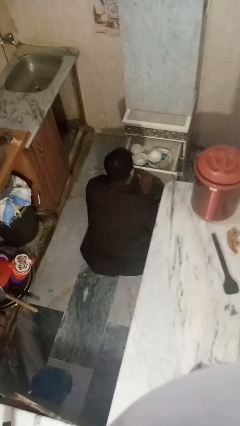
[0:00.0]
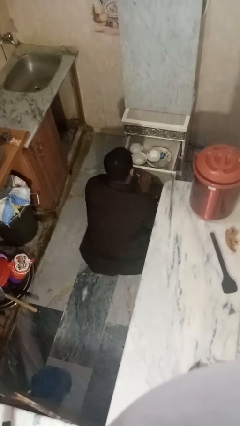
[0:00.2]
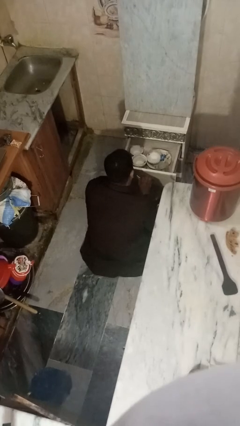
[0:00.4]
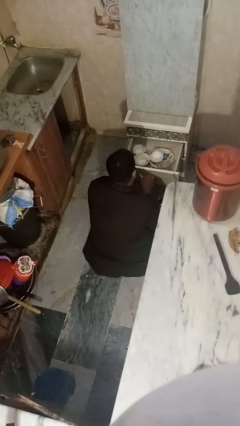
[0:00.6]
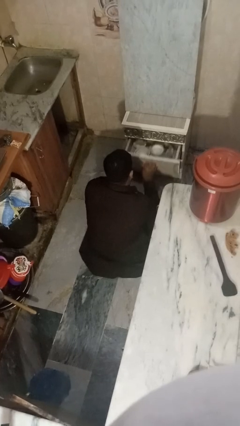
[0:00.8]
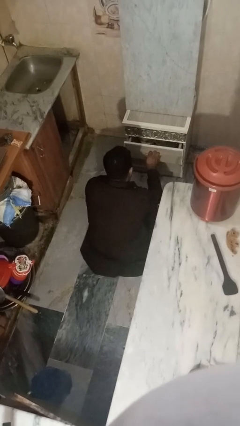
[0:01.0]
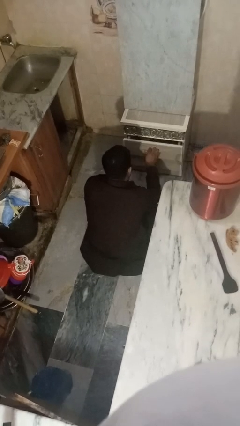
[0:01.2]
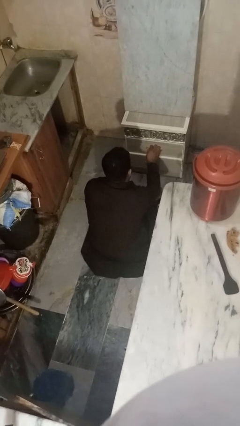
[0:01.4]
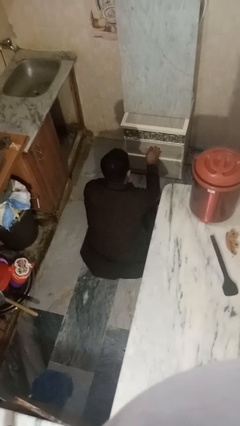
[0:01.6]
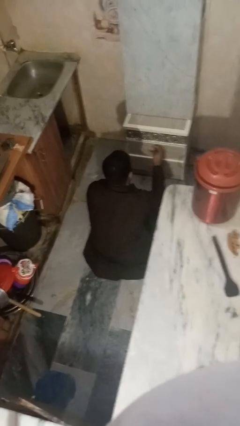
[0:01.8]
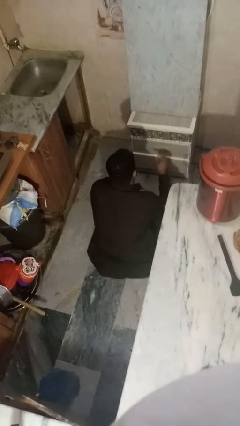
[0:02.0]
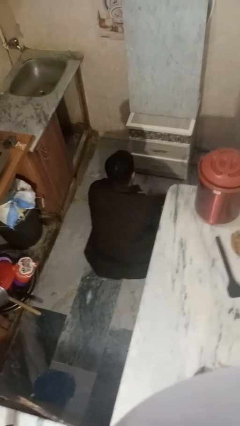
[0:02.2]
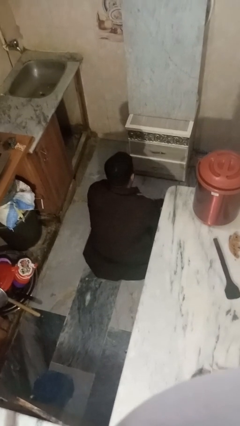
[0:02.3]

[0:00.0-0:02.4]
person closes kitchen drawer

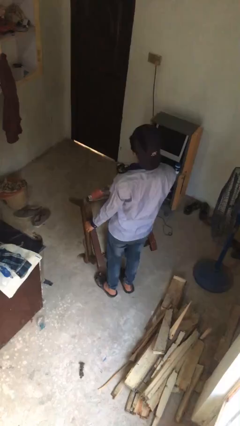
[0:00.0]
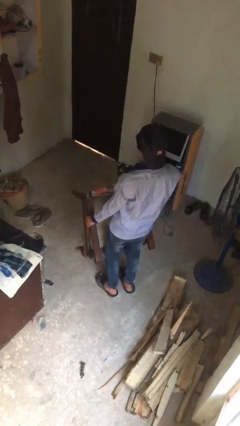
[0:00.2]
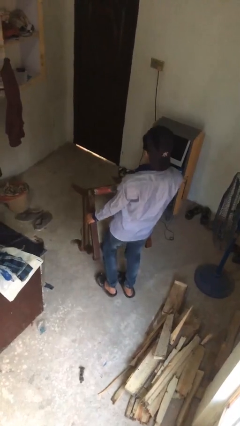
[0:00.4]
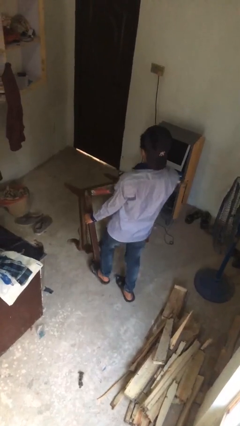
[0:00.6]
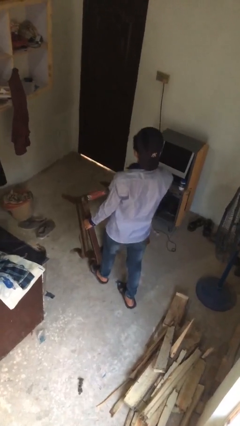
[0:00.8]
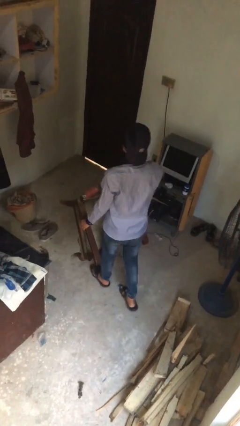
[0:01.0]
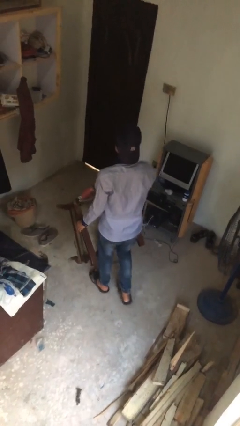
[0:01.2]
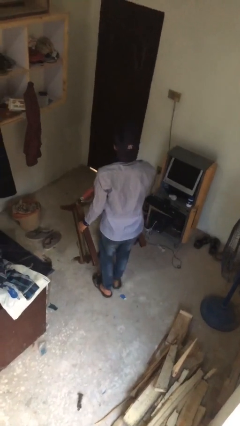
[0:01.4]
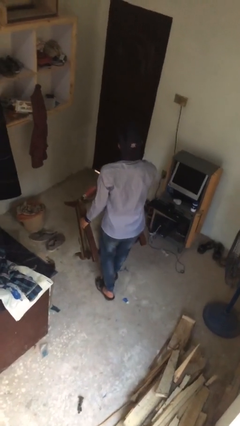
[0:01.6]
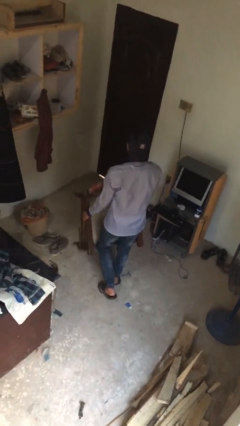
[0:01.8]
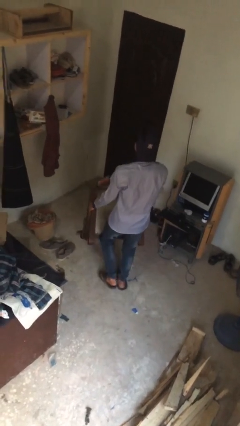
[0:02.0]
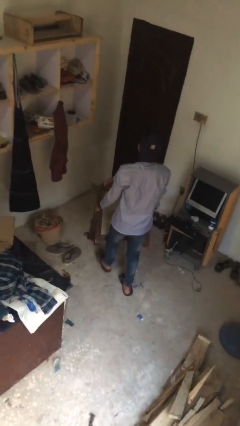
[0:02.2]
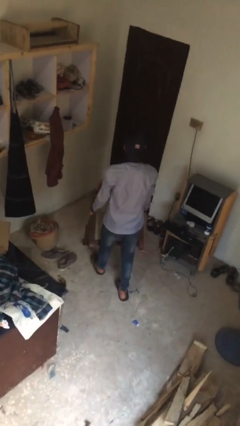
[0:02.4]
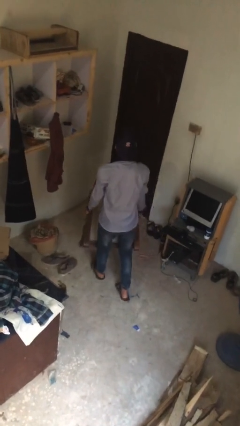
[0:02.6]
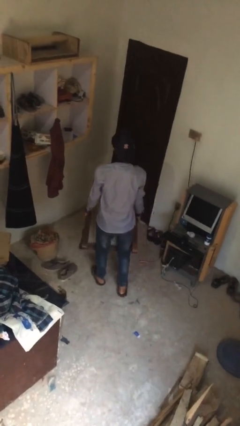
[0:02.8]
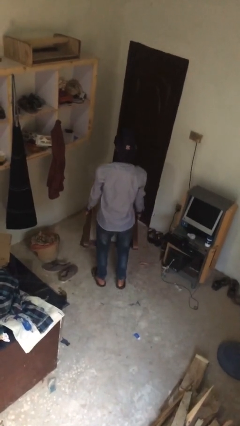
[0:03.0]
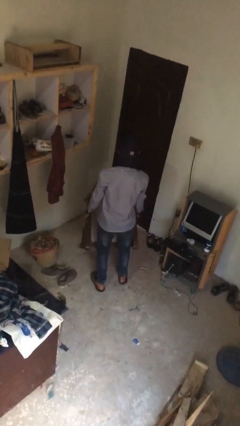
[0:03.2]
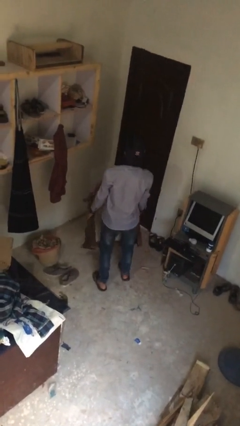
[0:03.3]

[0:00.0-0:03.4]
person carries heavy object

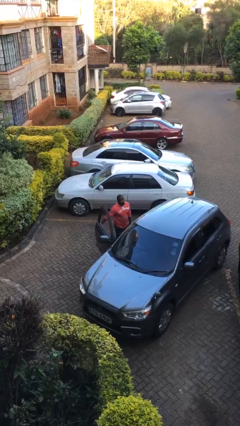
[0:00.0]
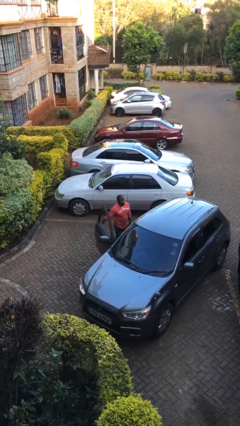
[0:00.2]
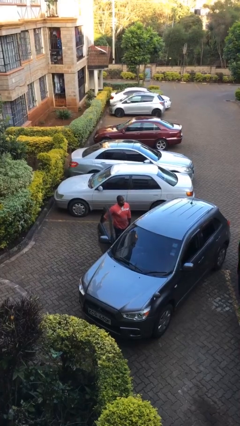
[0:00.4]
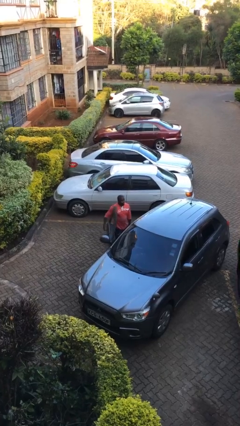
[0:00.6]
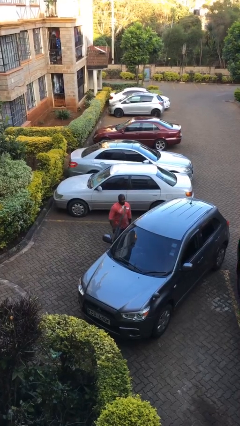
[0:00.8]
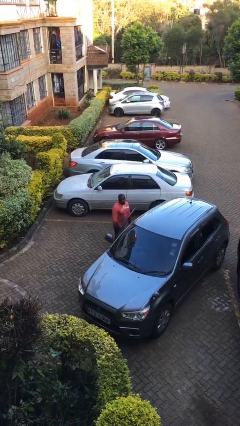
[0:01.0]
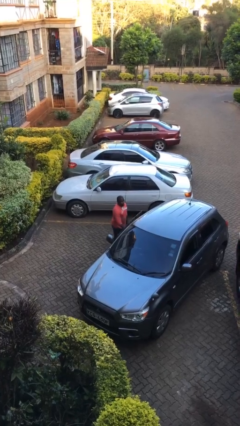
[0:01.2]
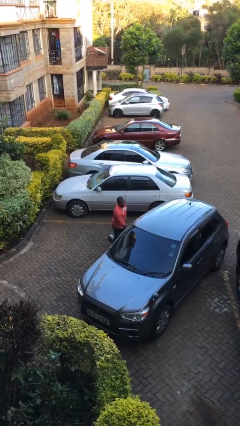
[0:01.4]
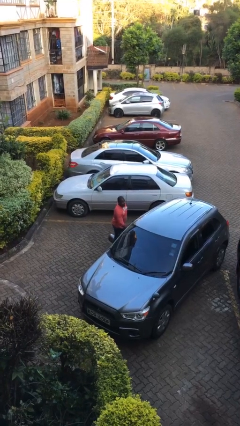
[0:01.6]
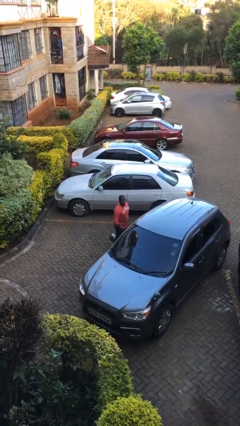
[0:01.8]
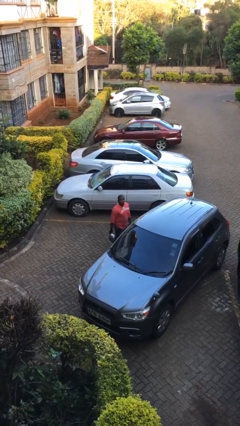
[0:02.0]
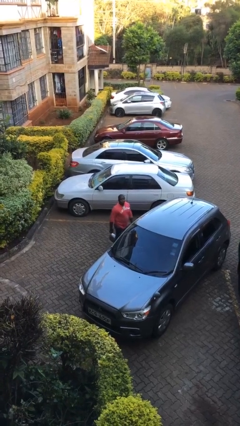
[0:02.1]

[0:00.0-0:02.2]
person closes car door

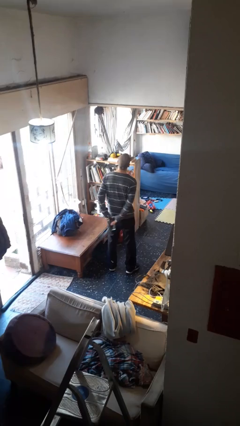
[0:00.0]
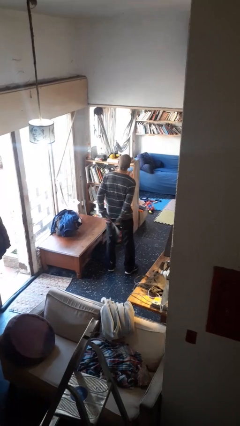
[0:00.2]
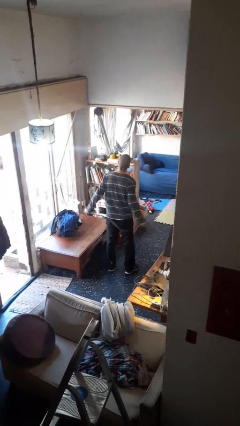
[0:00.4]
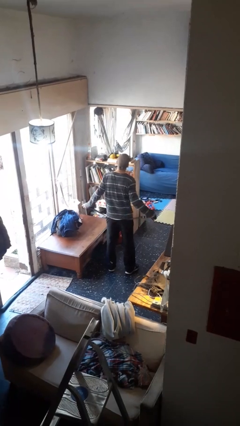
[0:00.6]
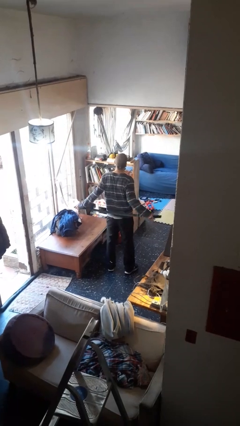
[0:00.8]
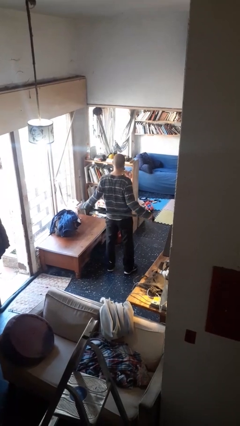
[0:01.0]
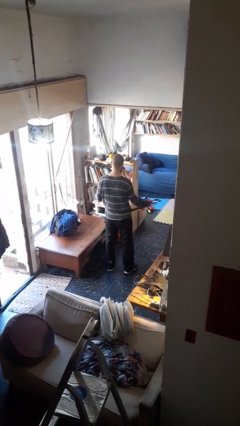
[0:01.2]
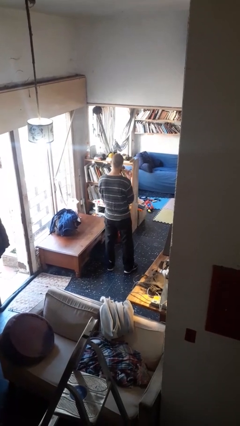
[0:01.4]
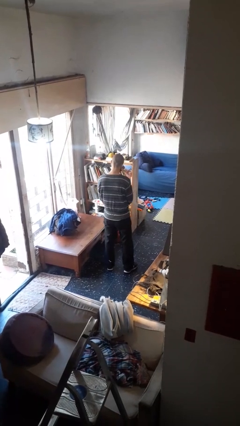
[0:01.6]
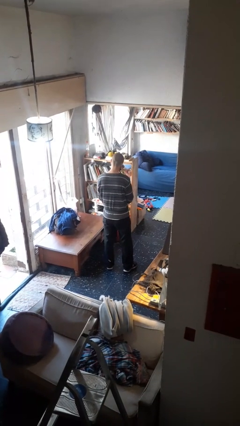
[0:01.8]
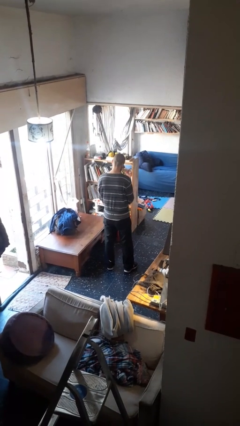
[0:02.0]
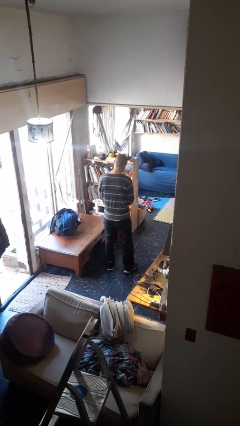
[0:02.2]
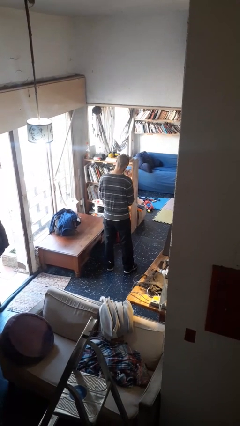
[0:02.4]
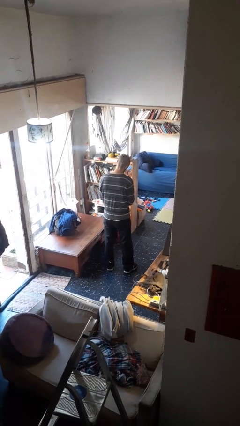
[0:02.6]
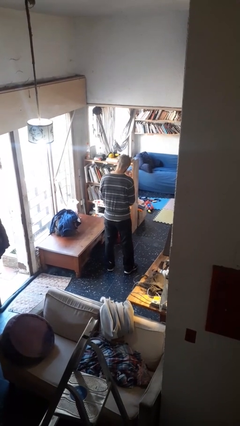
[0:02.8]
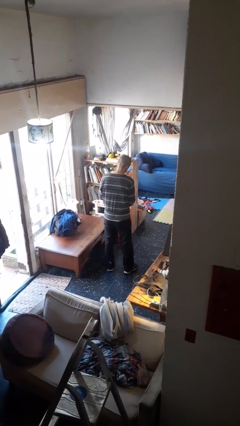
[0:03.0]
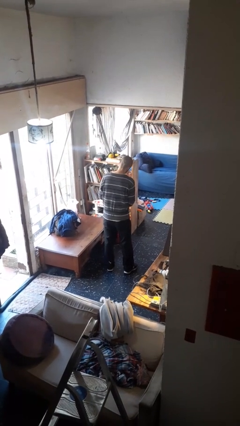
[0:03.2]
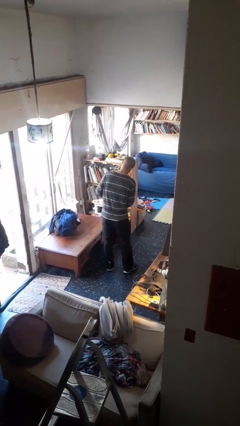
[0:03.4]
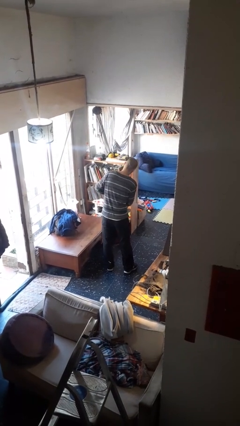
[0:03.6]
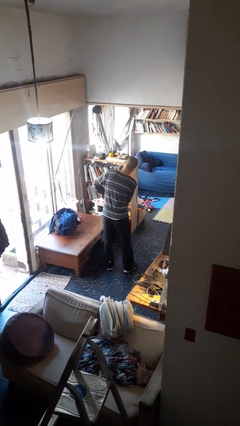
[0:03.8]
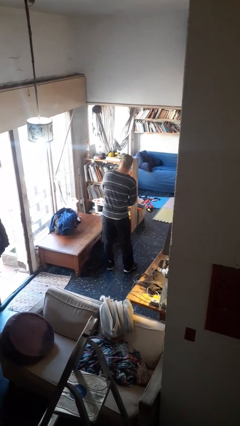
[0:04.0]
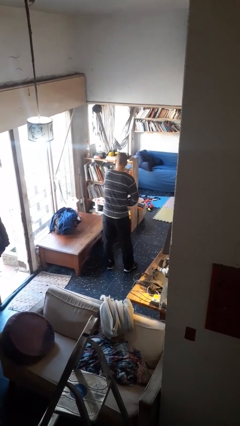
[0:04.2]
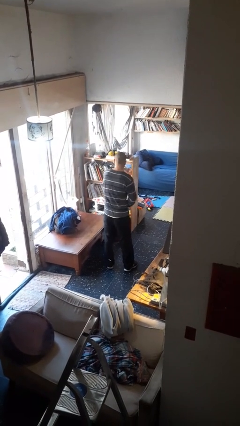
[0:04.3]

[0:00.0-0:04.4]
person puts on belt

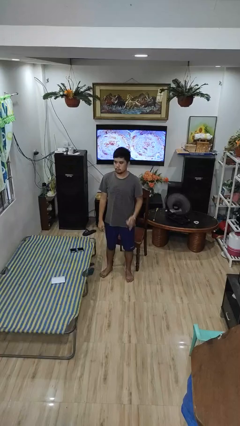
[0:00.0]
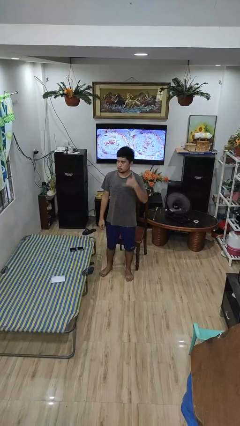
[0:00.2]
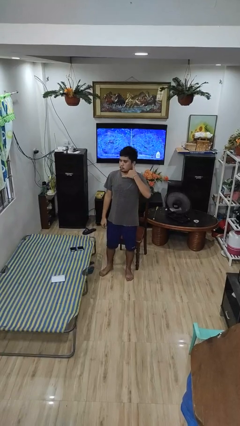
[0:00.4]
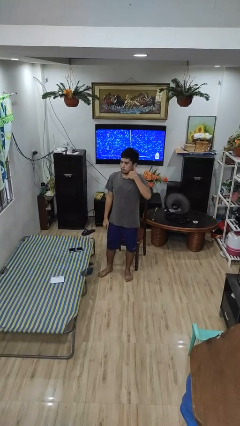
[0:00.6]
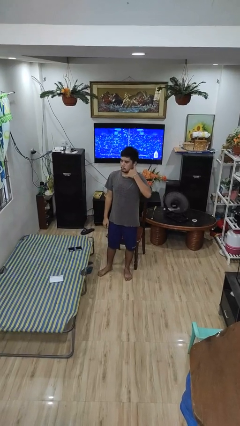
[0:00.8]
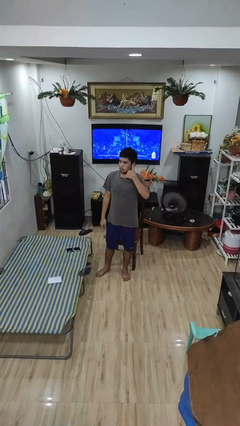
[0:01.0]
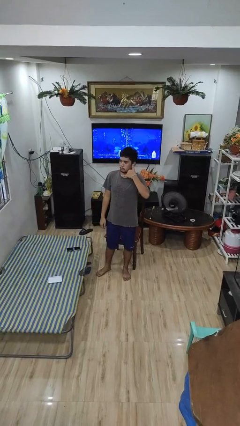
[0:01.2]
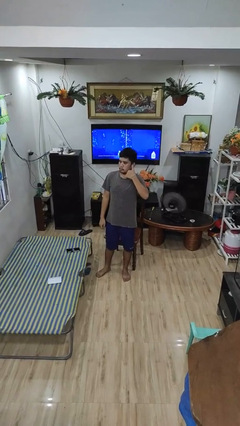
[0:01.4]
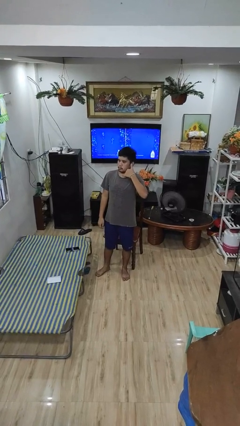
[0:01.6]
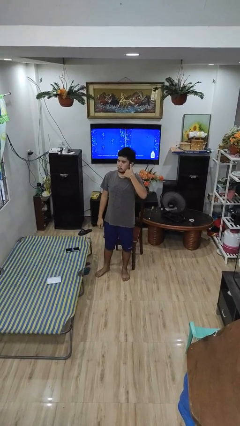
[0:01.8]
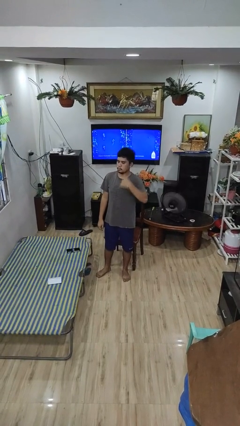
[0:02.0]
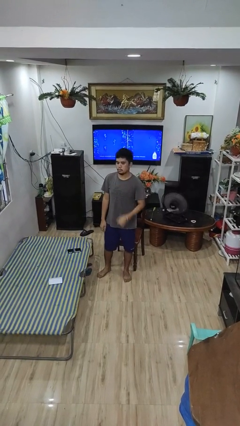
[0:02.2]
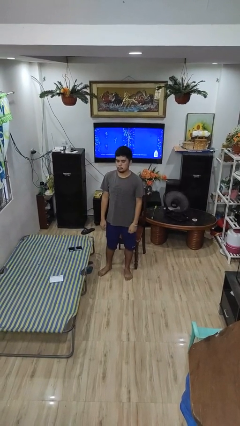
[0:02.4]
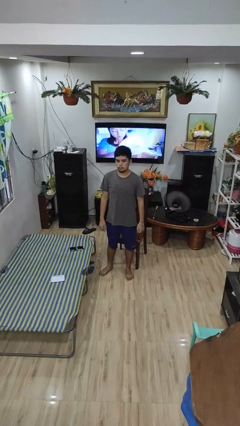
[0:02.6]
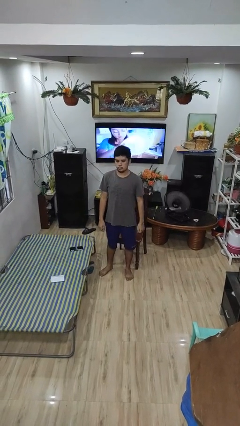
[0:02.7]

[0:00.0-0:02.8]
person gestures call me

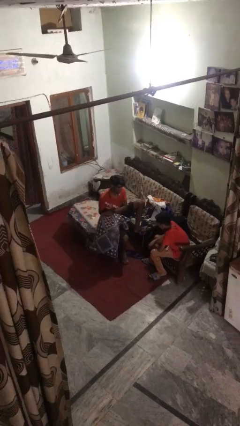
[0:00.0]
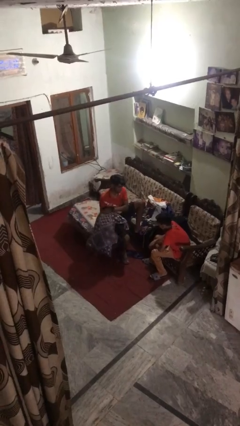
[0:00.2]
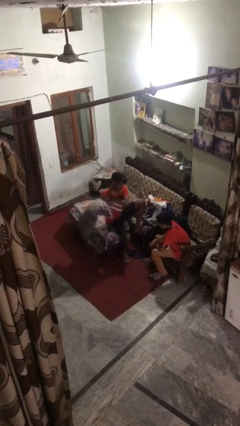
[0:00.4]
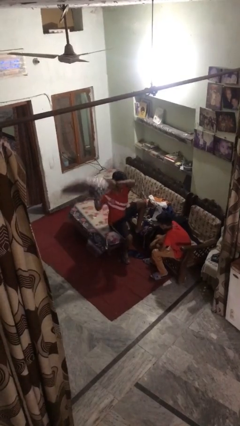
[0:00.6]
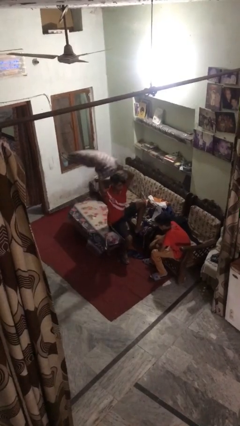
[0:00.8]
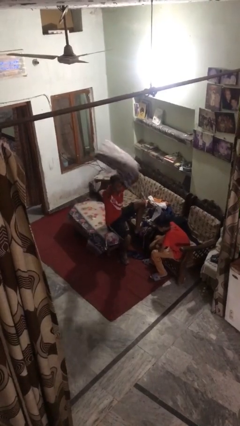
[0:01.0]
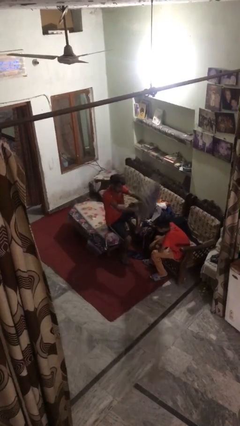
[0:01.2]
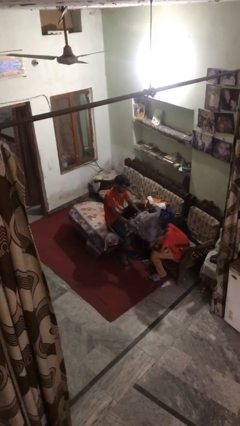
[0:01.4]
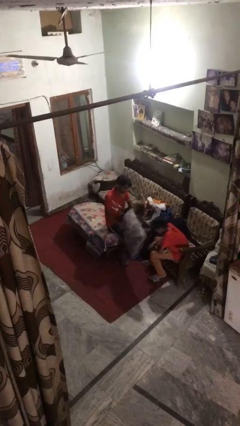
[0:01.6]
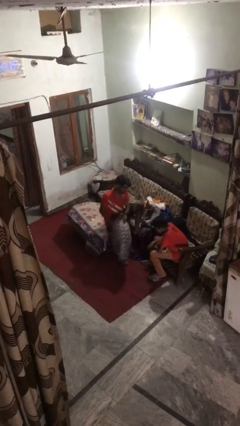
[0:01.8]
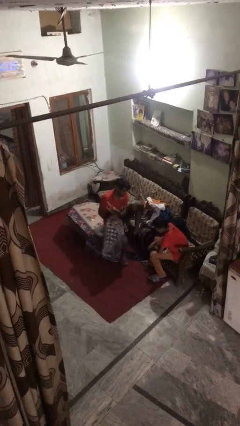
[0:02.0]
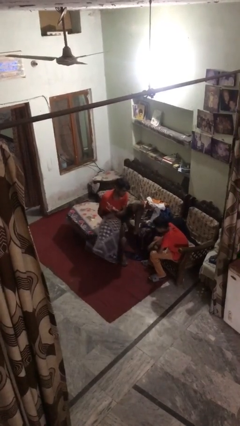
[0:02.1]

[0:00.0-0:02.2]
person hits person with pillow
